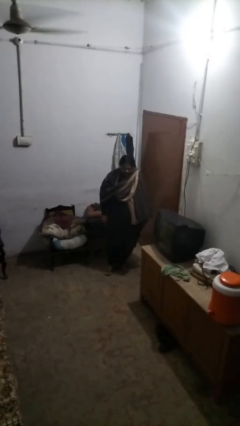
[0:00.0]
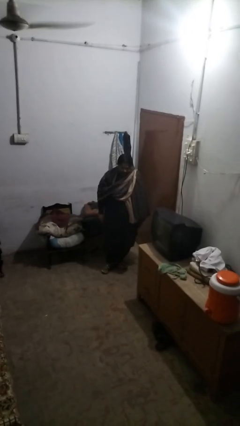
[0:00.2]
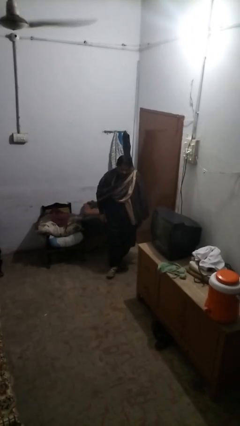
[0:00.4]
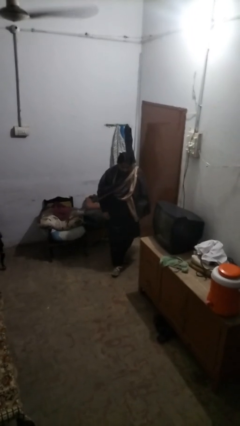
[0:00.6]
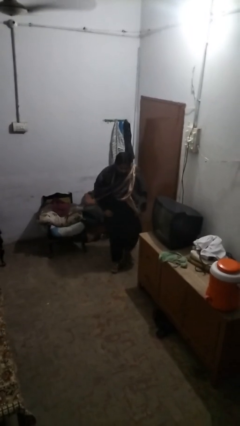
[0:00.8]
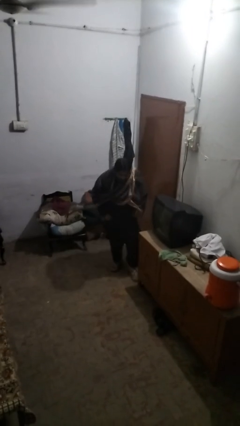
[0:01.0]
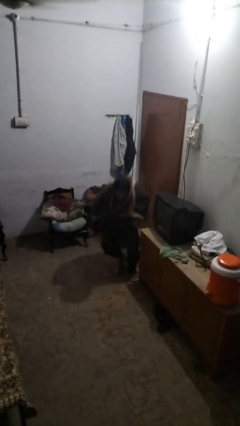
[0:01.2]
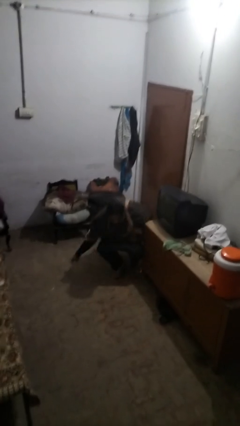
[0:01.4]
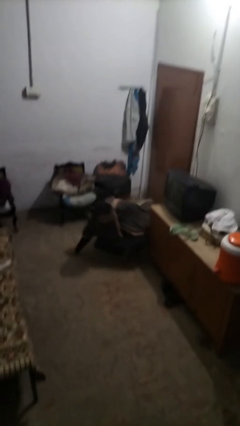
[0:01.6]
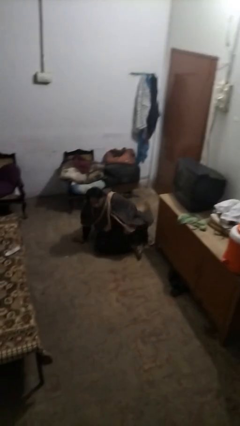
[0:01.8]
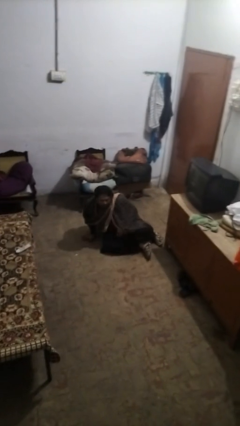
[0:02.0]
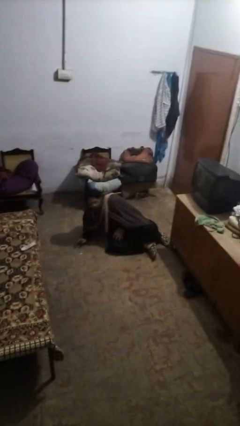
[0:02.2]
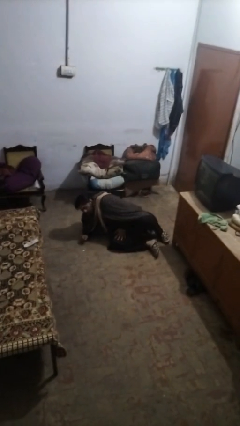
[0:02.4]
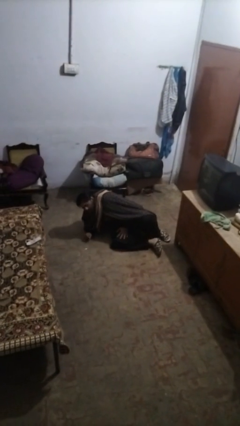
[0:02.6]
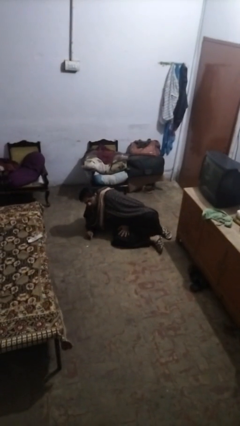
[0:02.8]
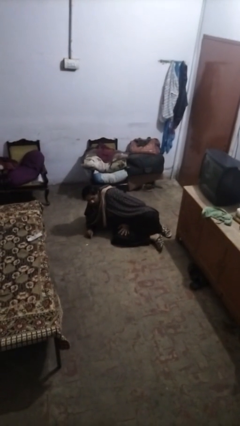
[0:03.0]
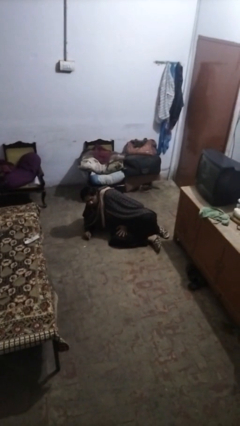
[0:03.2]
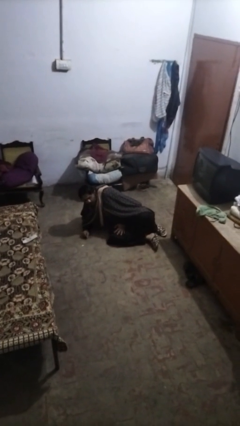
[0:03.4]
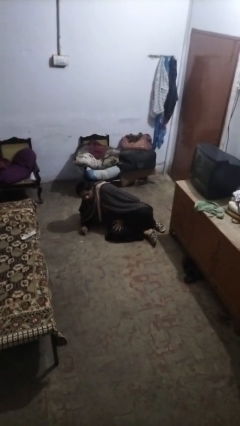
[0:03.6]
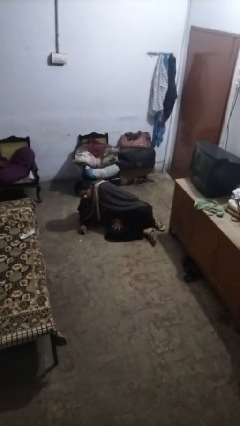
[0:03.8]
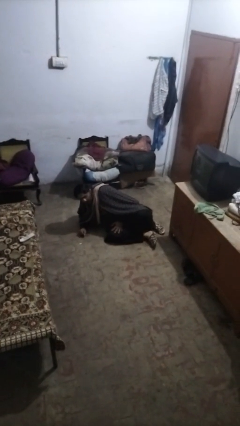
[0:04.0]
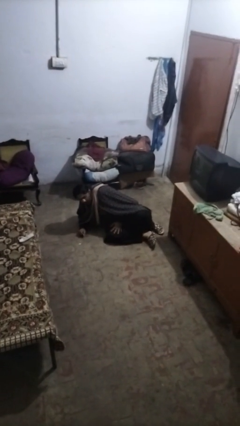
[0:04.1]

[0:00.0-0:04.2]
person trips on object on floor

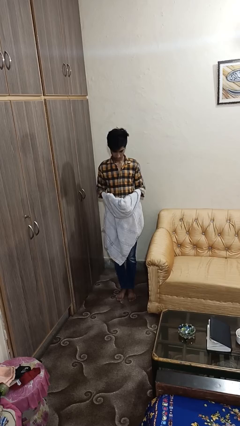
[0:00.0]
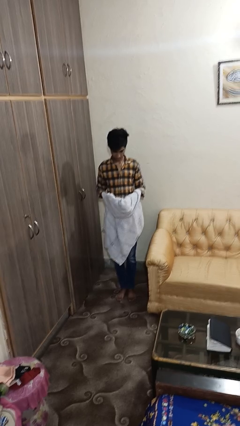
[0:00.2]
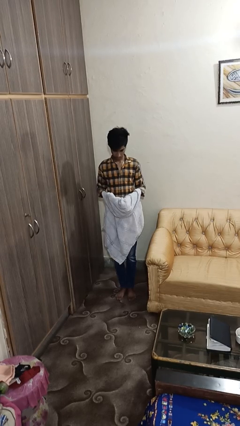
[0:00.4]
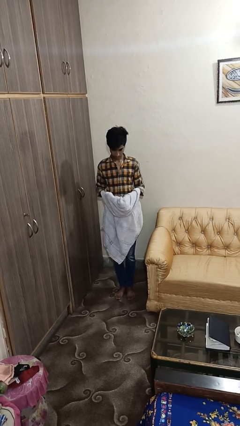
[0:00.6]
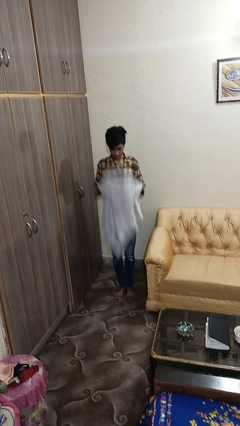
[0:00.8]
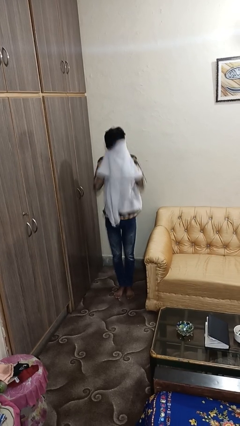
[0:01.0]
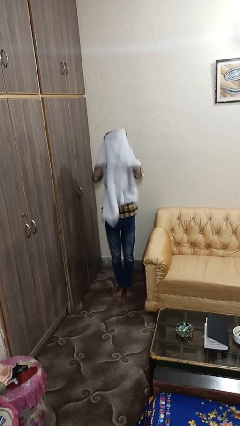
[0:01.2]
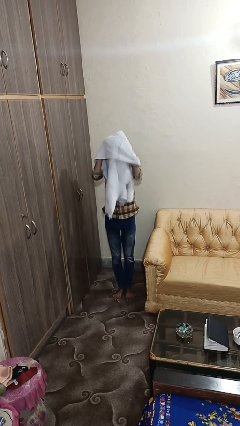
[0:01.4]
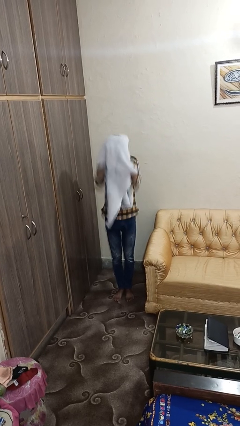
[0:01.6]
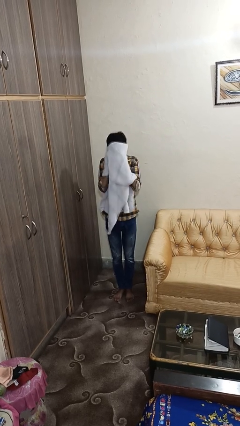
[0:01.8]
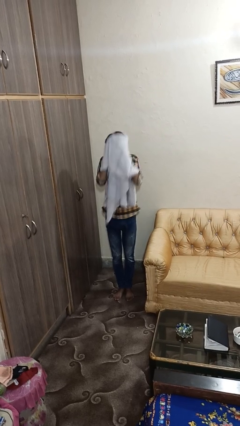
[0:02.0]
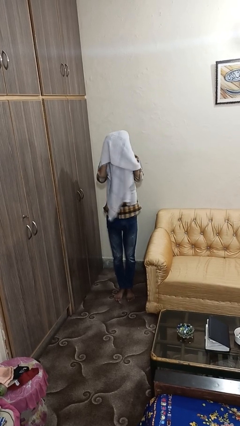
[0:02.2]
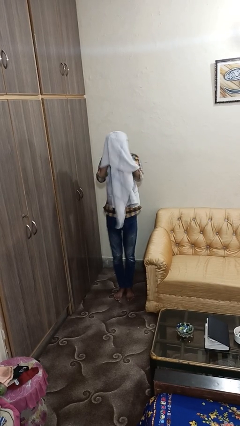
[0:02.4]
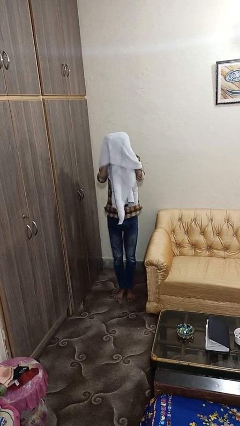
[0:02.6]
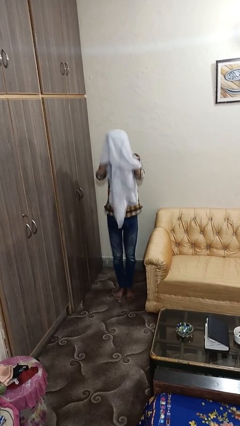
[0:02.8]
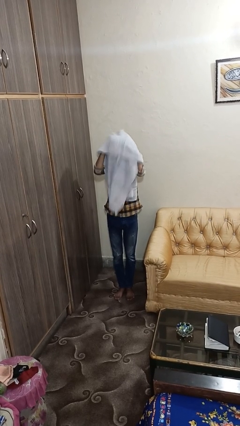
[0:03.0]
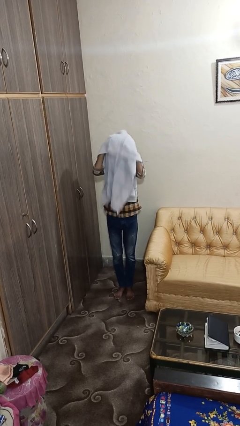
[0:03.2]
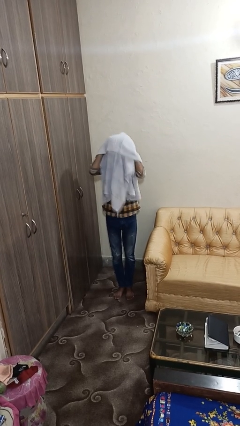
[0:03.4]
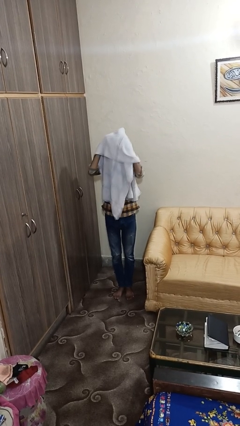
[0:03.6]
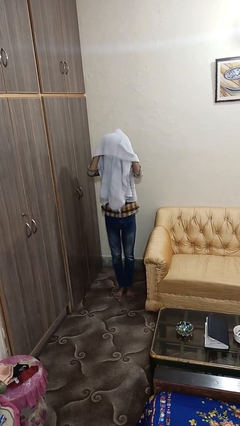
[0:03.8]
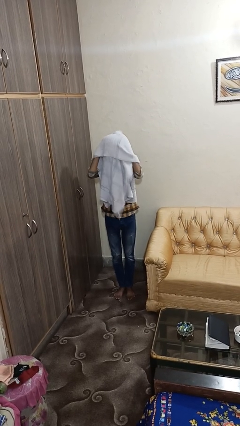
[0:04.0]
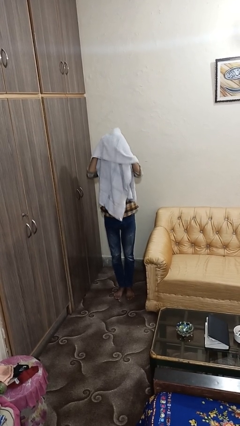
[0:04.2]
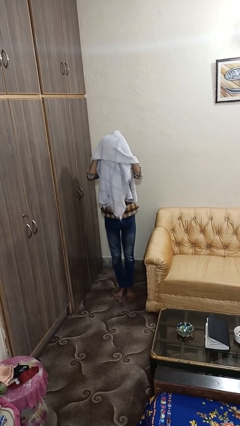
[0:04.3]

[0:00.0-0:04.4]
person dries hair with towel

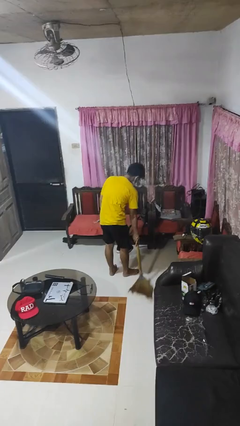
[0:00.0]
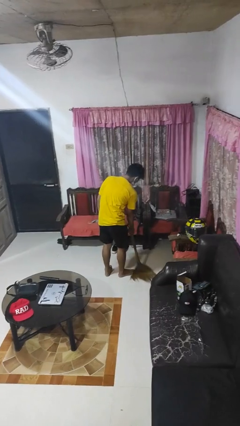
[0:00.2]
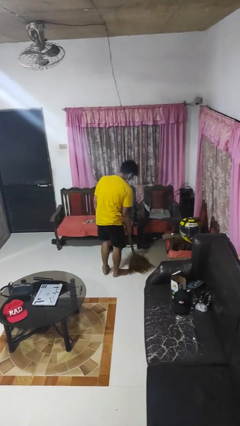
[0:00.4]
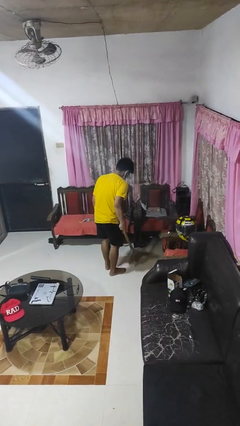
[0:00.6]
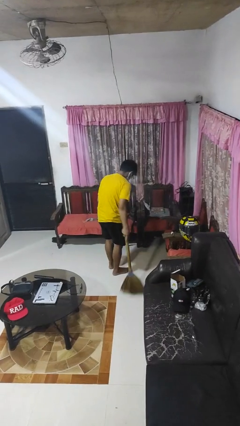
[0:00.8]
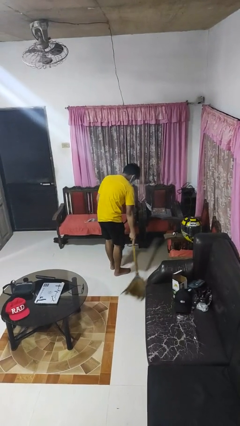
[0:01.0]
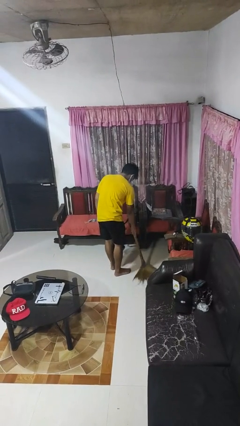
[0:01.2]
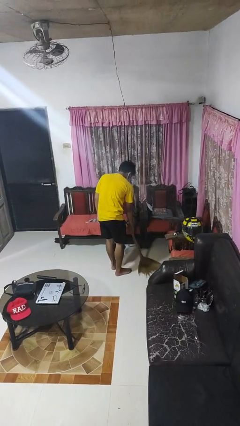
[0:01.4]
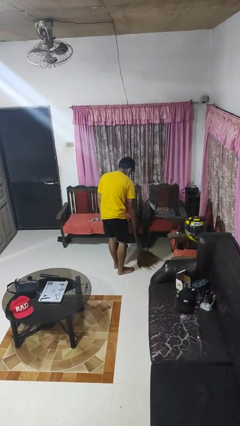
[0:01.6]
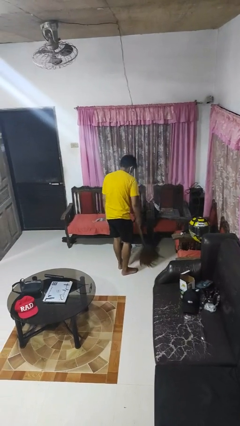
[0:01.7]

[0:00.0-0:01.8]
person sweeps floor

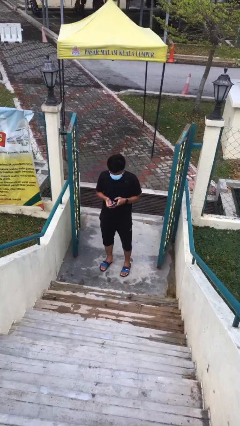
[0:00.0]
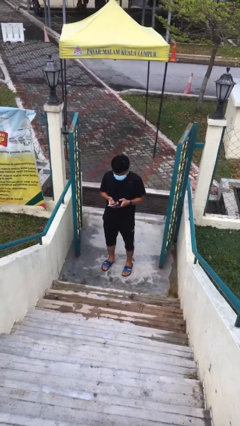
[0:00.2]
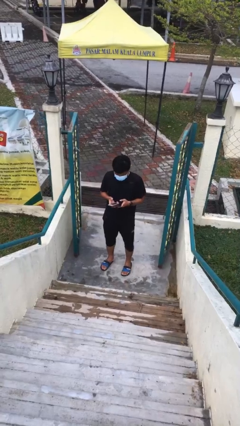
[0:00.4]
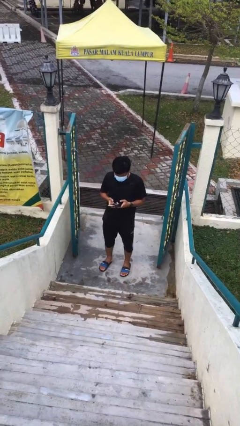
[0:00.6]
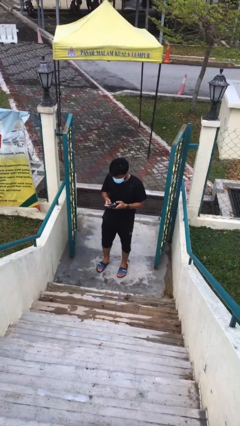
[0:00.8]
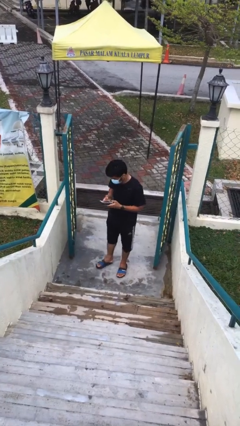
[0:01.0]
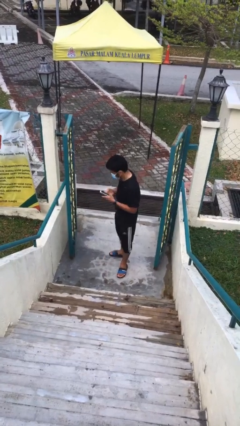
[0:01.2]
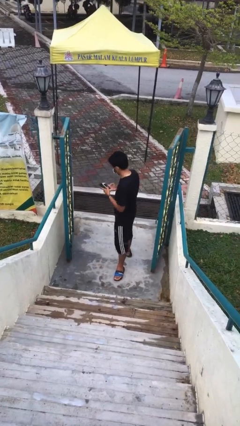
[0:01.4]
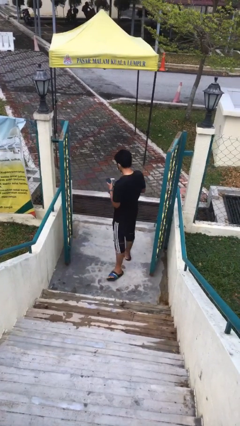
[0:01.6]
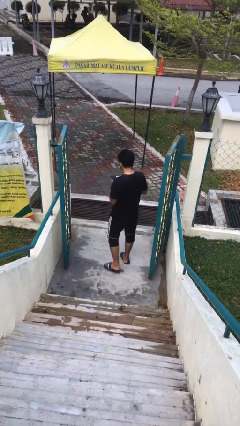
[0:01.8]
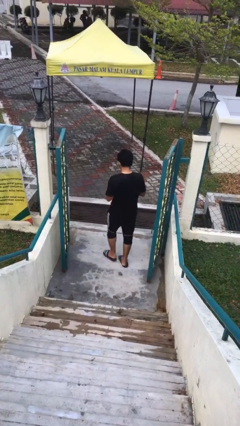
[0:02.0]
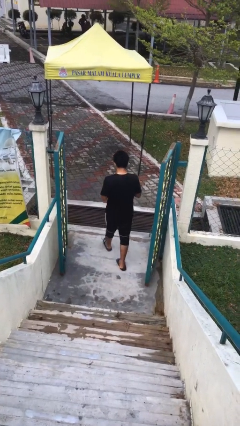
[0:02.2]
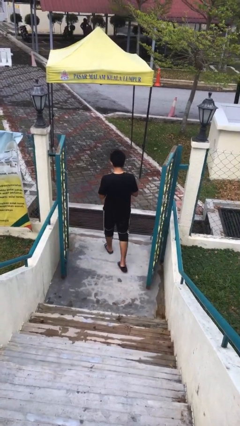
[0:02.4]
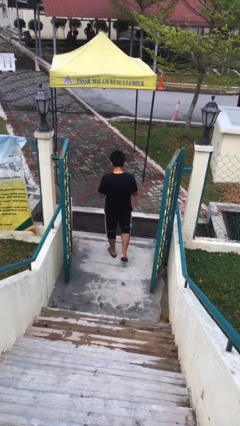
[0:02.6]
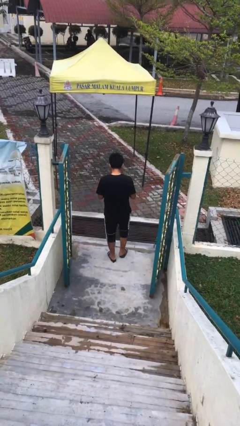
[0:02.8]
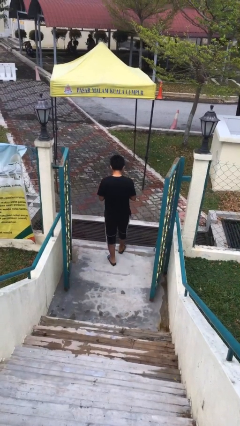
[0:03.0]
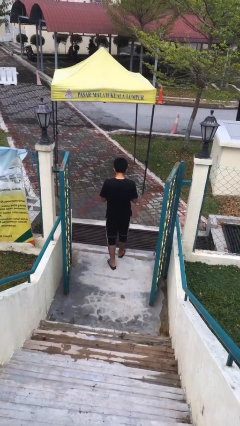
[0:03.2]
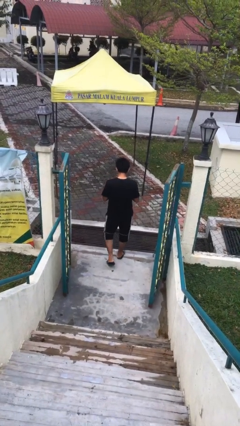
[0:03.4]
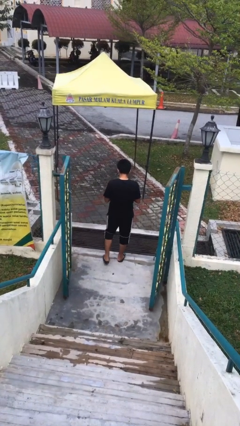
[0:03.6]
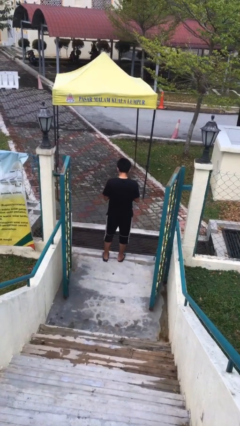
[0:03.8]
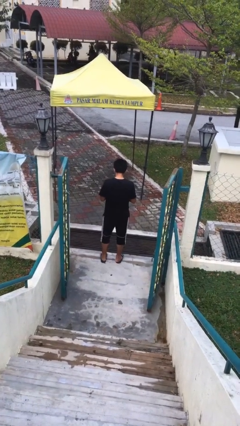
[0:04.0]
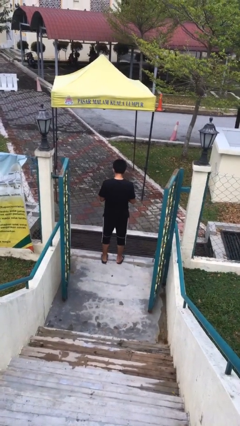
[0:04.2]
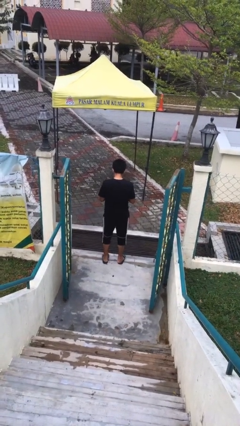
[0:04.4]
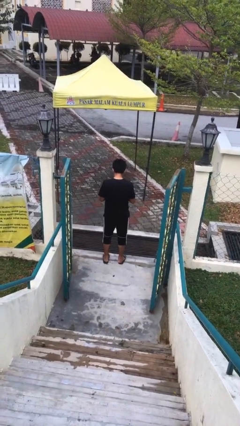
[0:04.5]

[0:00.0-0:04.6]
person exits scene through structure

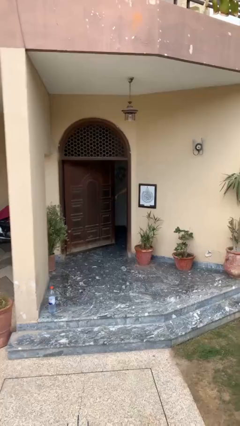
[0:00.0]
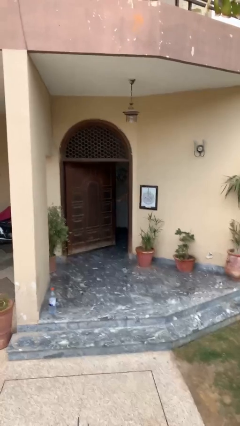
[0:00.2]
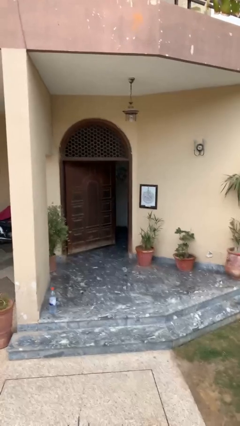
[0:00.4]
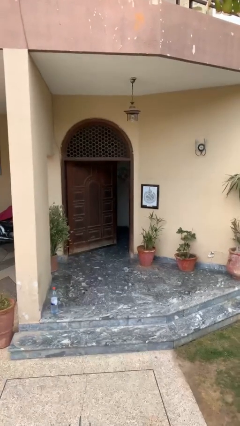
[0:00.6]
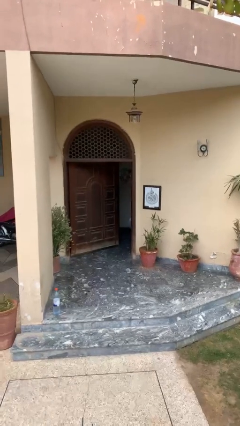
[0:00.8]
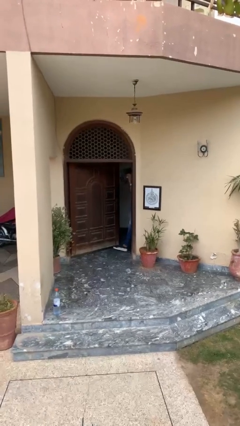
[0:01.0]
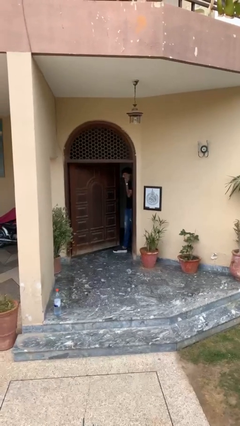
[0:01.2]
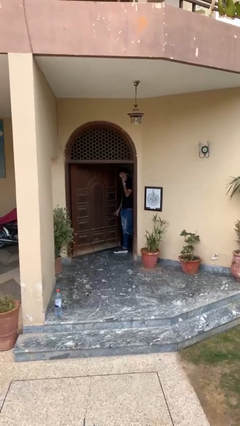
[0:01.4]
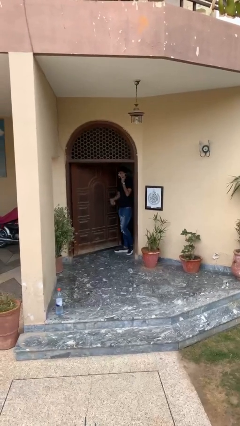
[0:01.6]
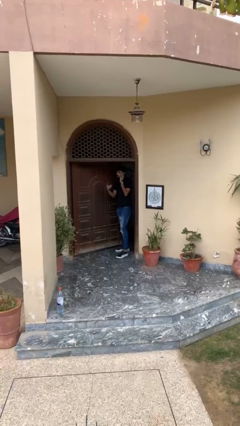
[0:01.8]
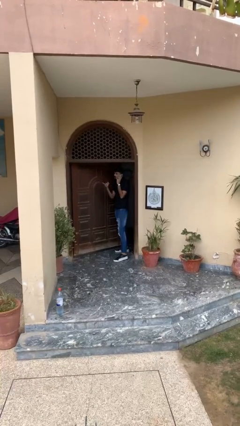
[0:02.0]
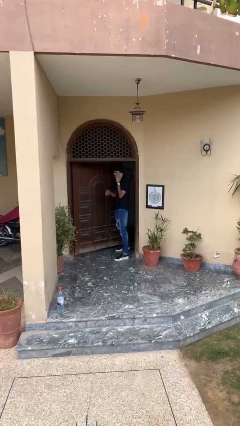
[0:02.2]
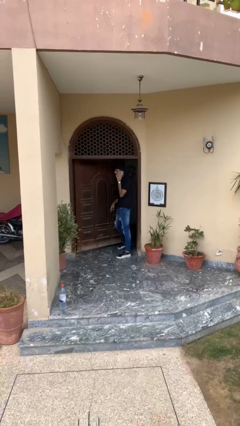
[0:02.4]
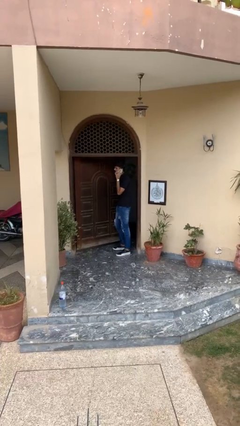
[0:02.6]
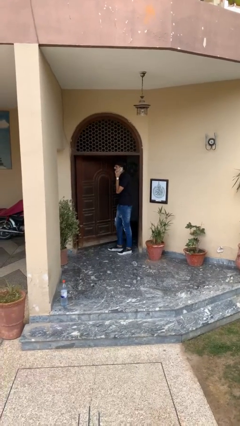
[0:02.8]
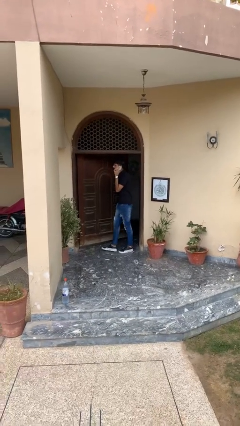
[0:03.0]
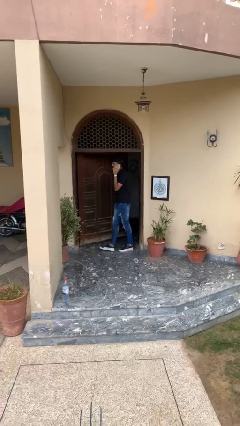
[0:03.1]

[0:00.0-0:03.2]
person enters scene through structure
